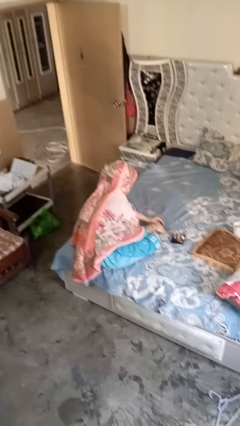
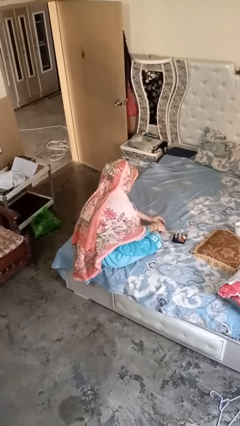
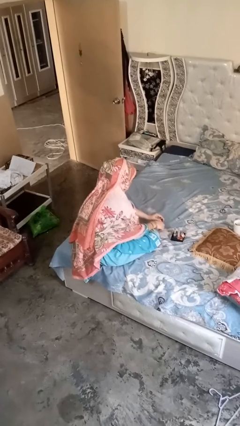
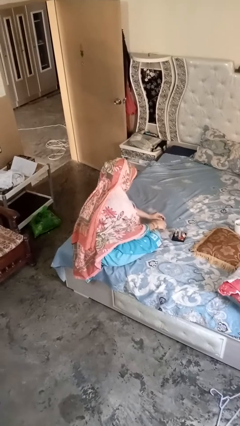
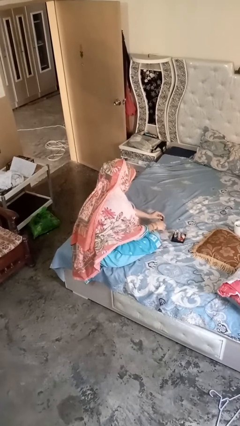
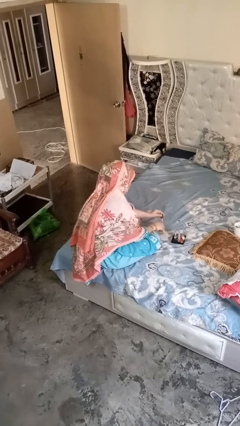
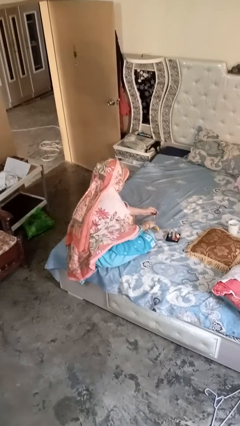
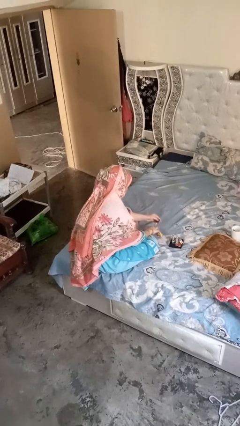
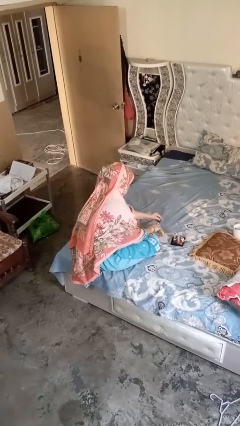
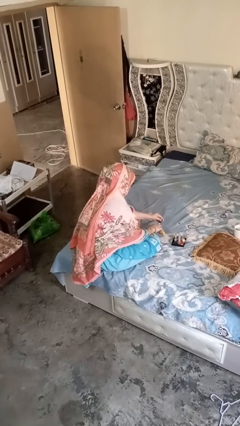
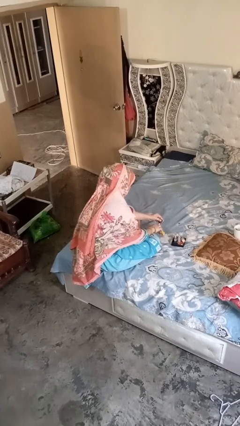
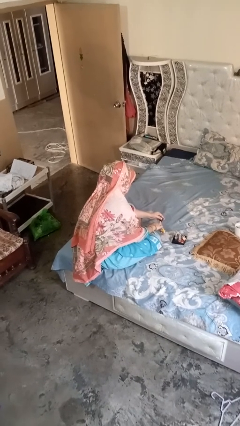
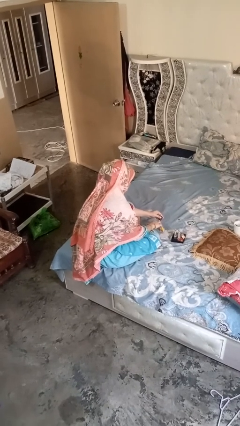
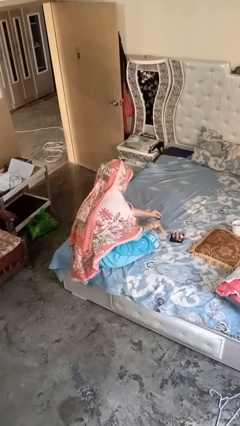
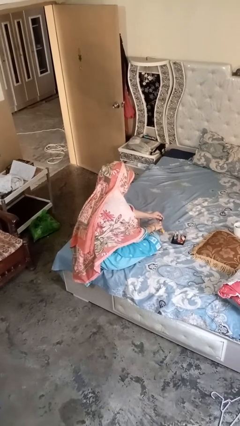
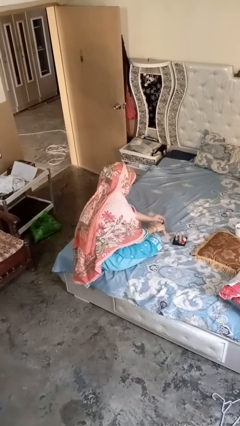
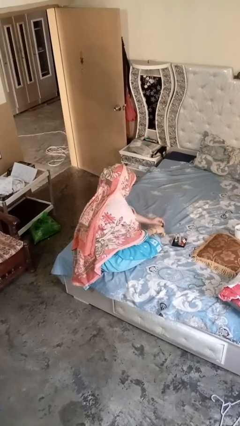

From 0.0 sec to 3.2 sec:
person paints fingernails

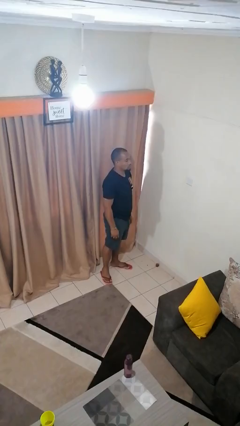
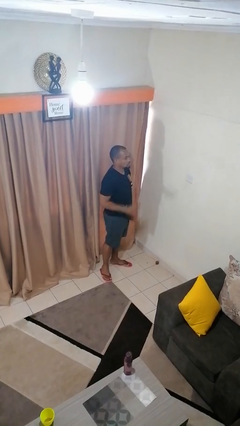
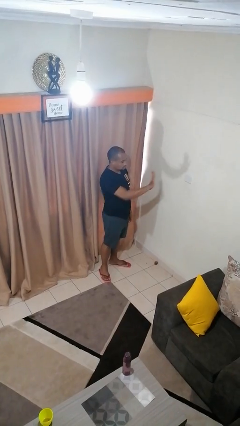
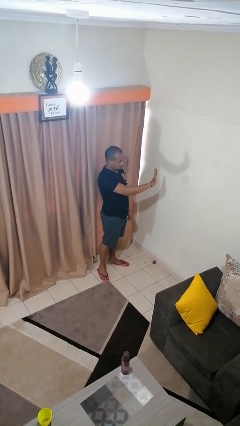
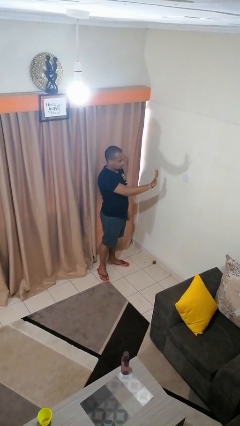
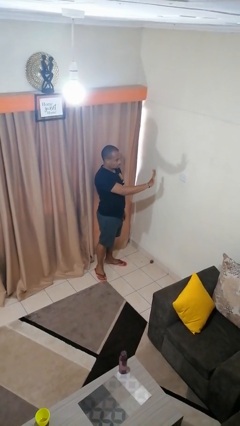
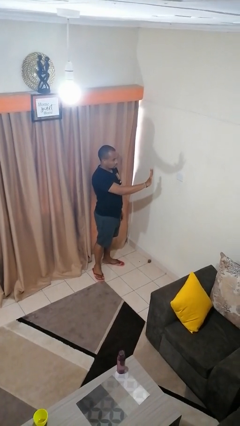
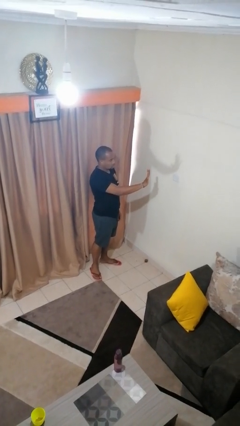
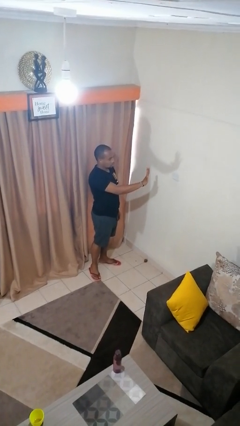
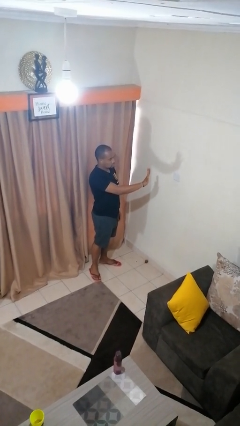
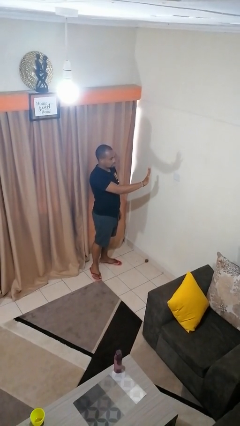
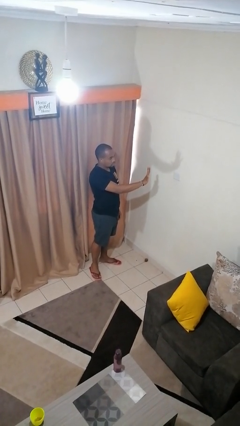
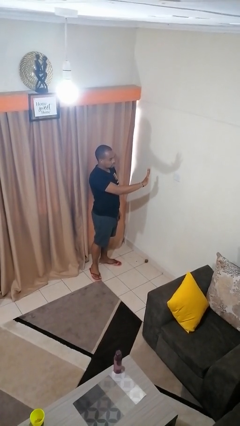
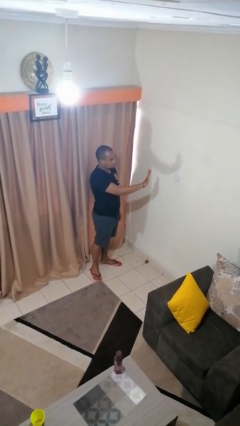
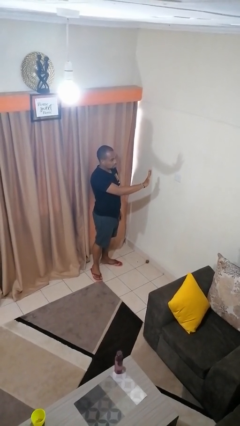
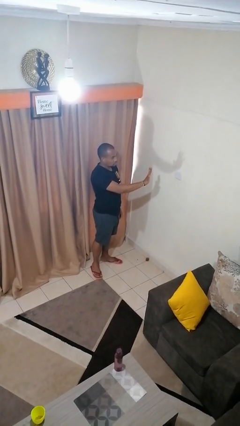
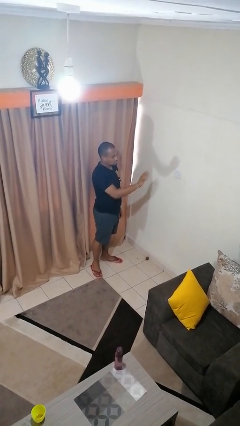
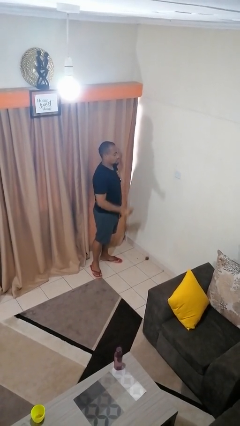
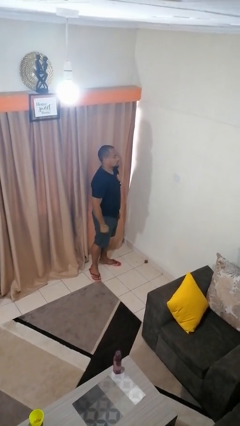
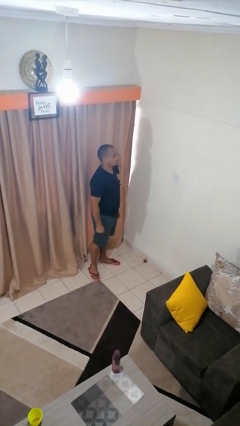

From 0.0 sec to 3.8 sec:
person gestures number five

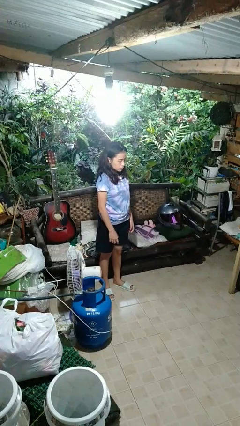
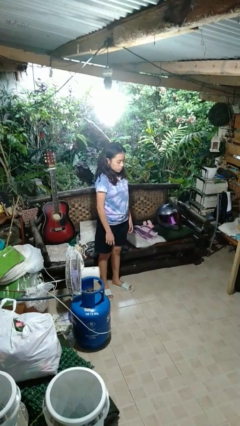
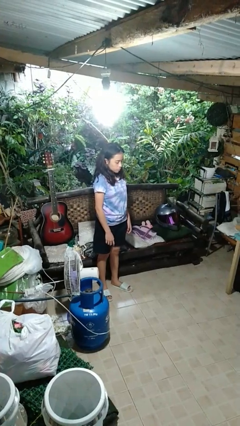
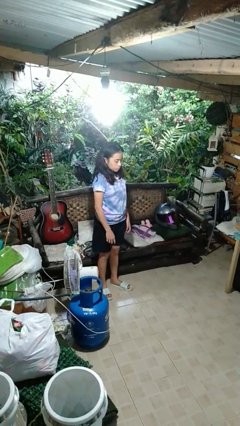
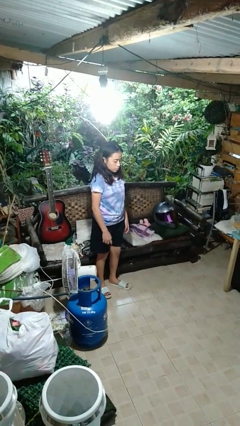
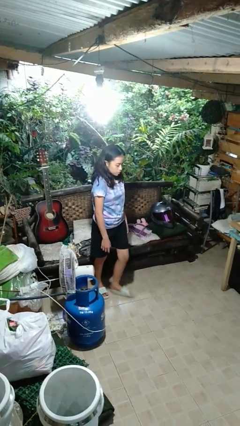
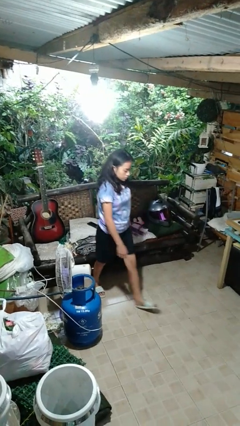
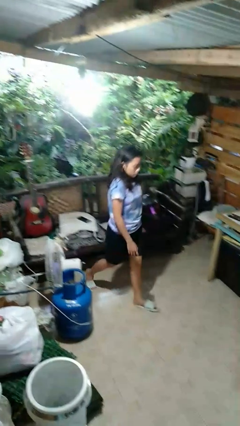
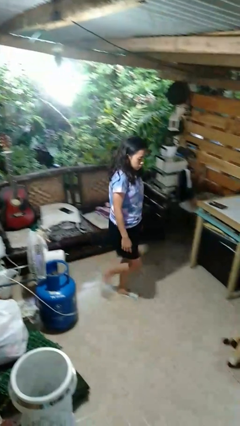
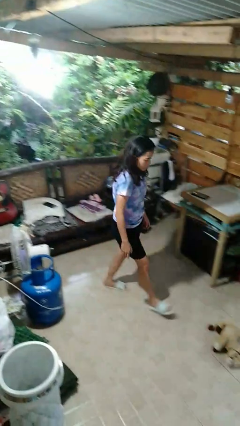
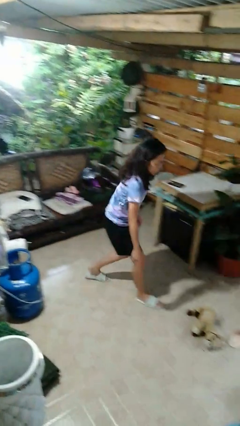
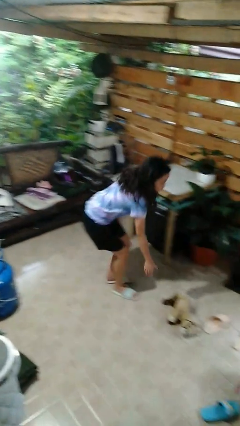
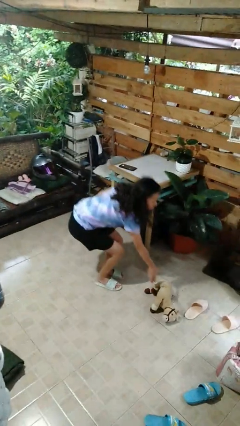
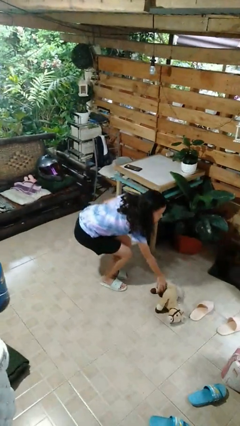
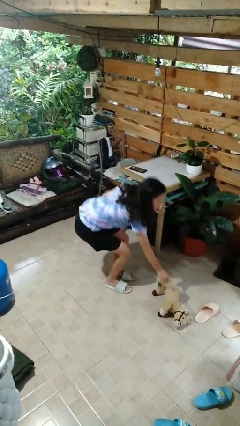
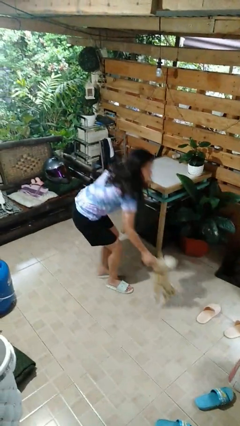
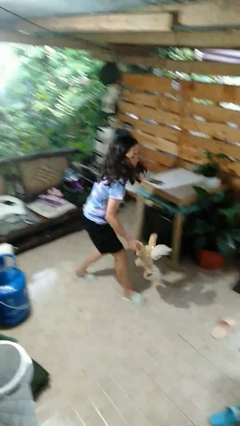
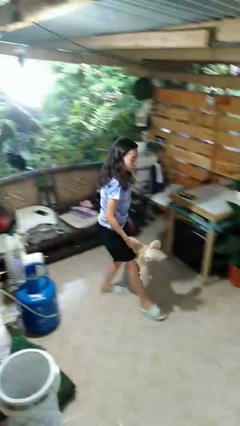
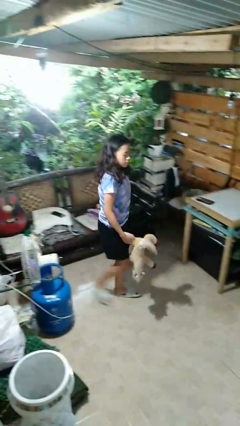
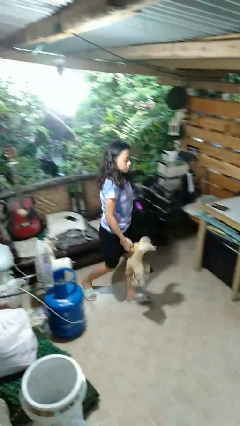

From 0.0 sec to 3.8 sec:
person picks up object from floor

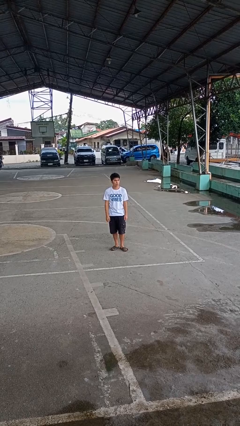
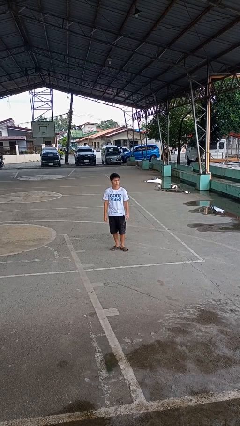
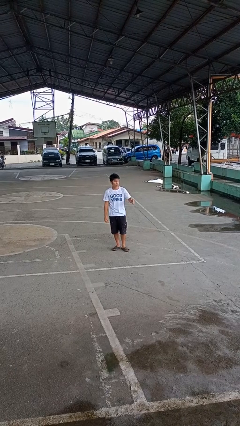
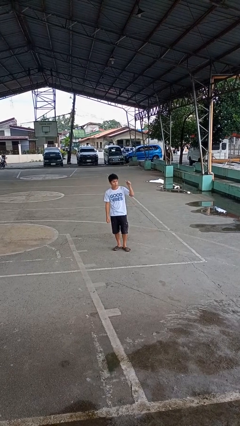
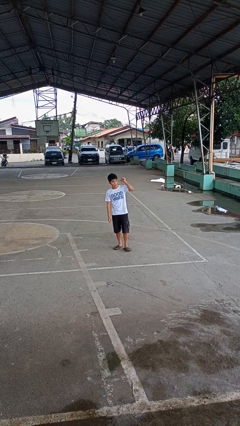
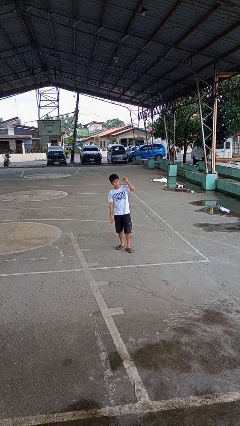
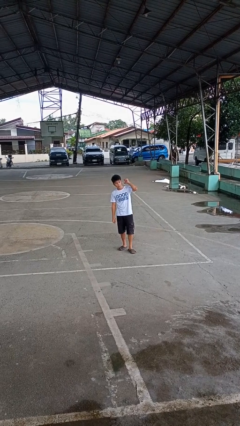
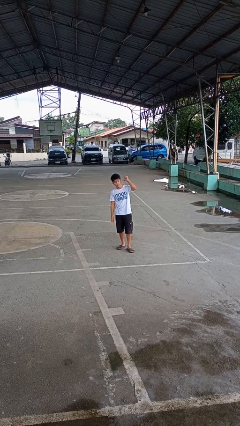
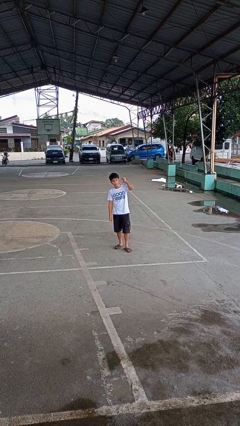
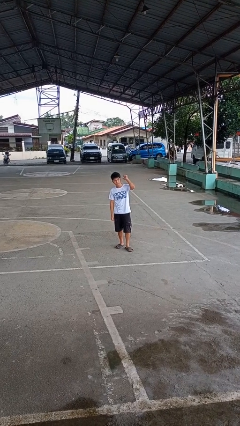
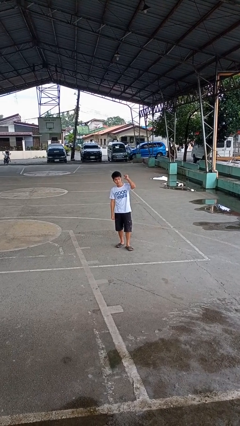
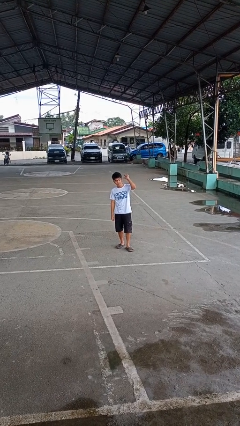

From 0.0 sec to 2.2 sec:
person gestures behind me

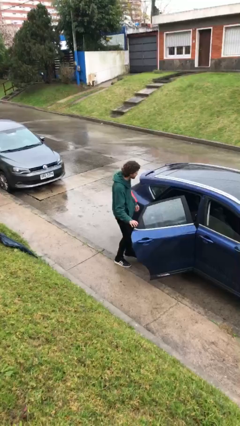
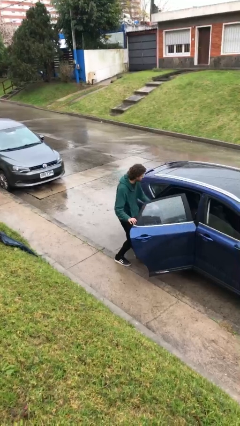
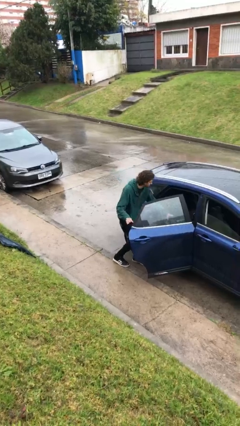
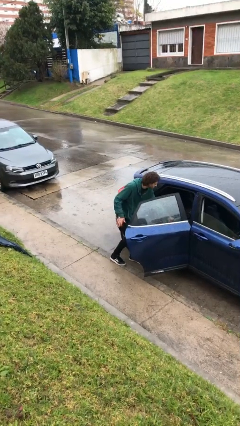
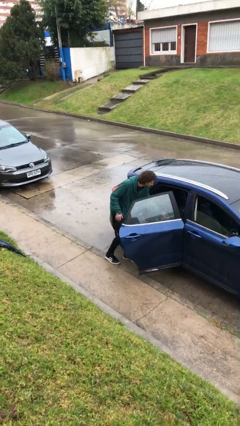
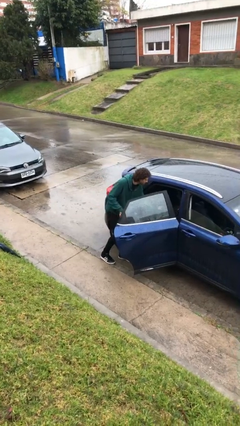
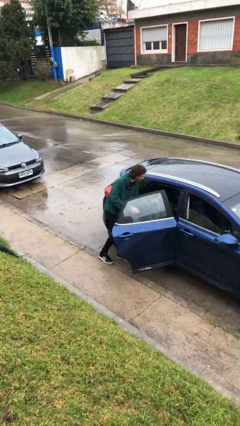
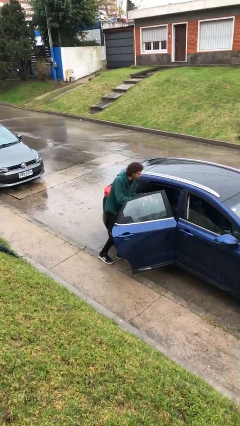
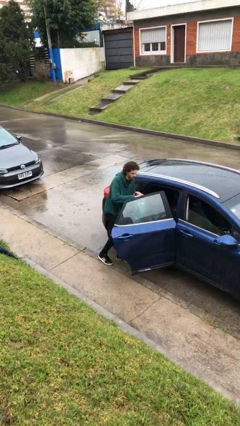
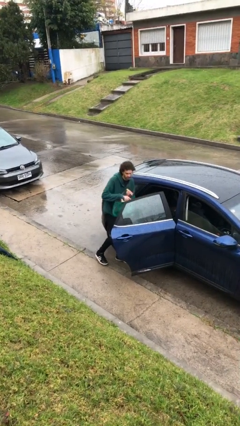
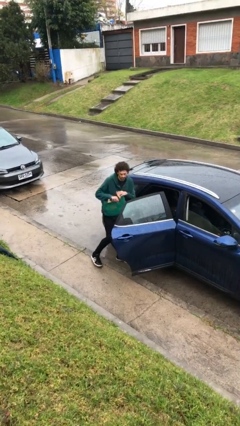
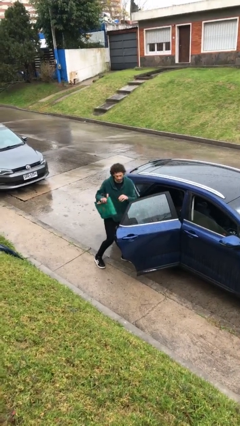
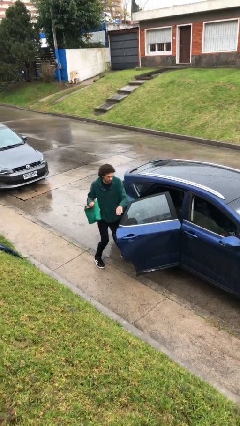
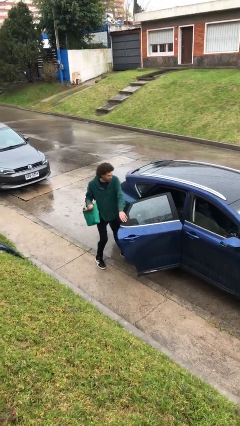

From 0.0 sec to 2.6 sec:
person unloads car

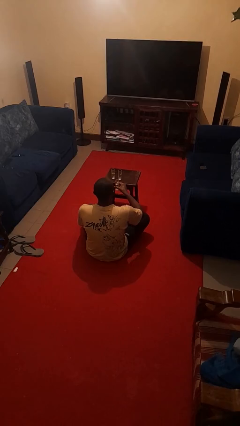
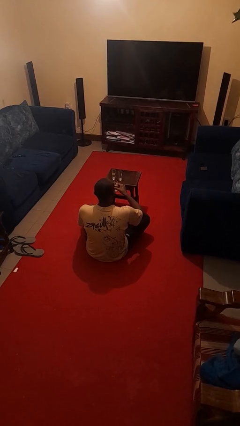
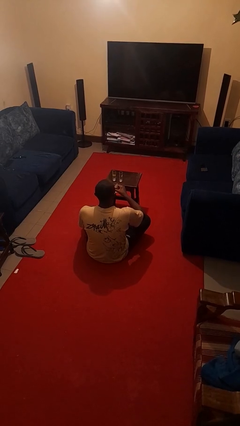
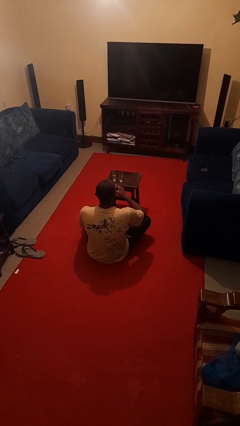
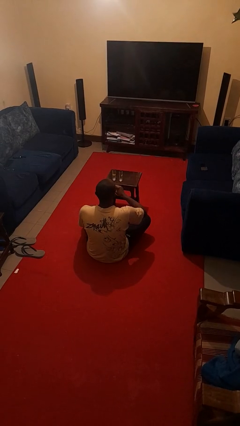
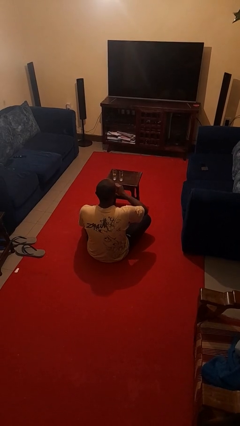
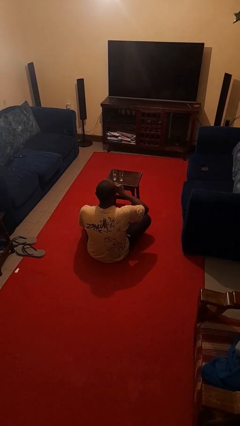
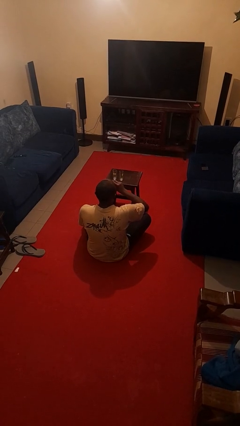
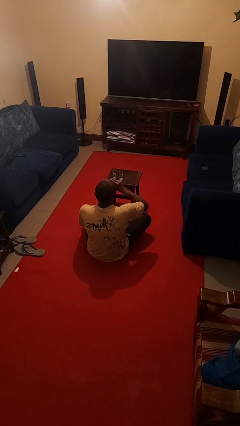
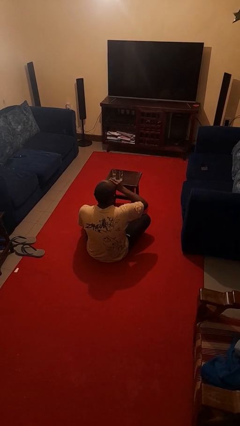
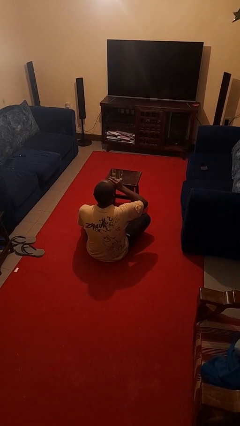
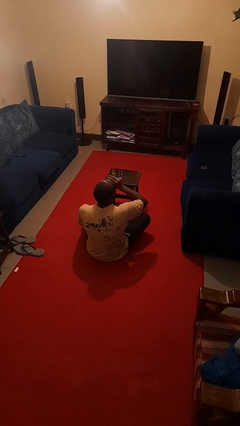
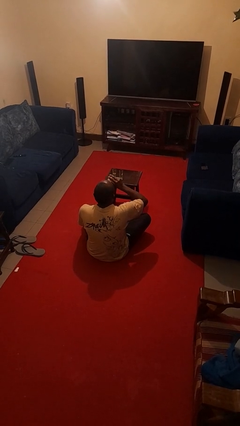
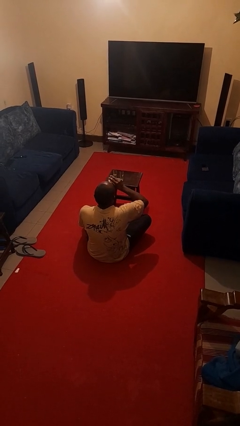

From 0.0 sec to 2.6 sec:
person drinks from shotglass
